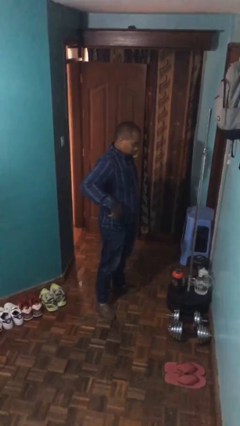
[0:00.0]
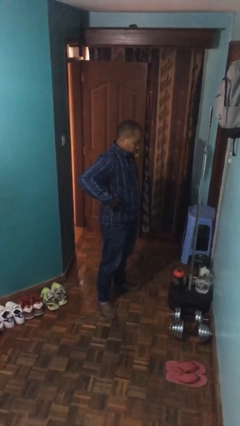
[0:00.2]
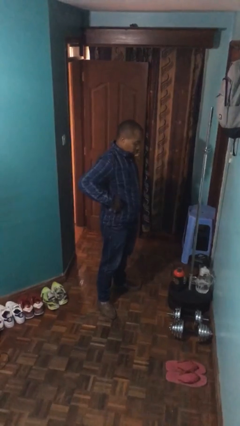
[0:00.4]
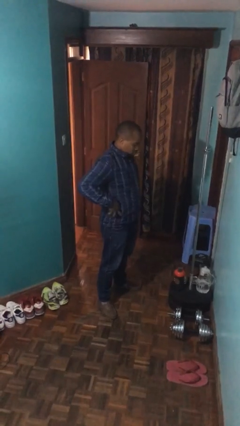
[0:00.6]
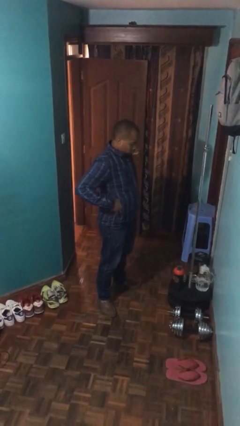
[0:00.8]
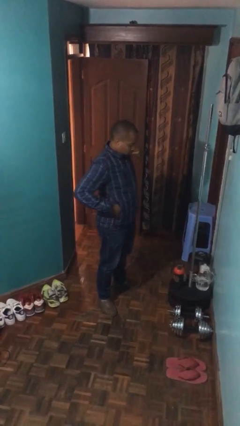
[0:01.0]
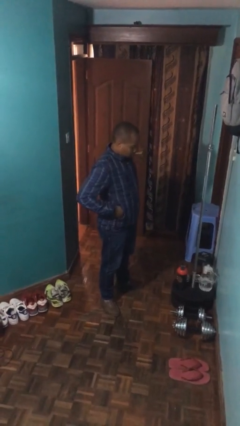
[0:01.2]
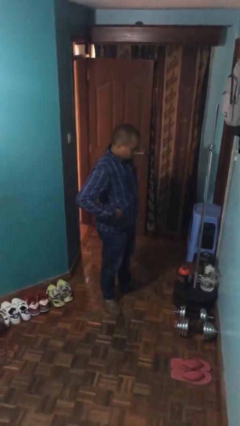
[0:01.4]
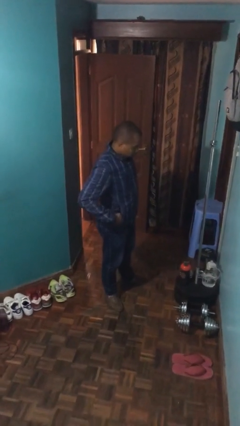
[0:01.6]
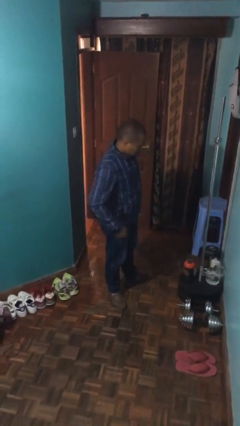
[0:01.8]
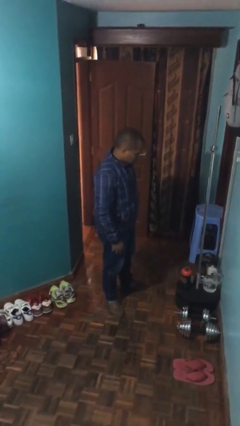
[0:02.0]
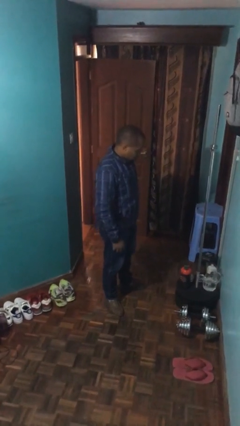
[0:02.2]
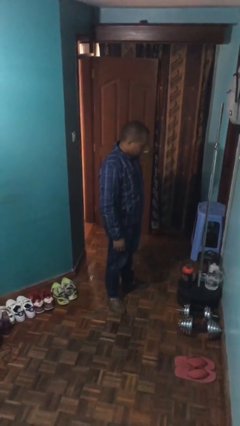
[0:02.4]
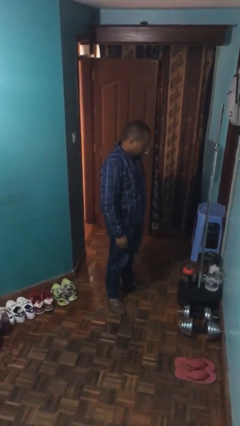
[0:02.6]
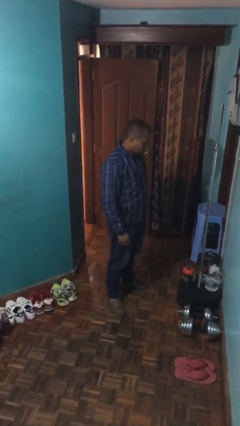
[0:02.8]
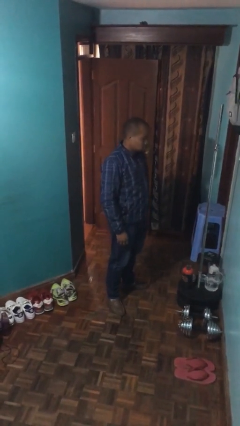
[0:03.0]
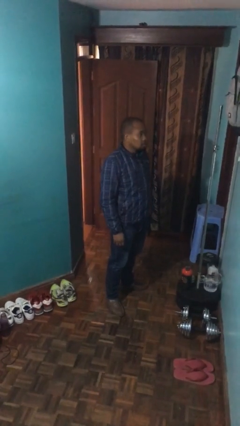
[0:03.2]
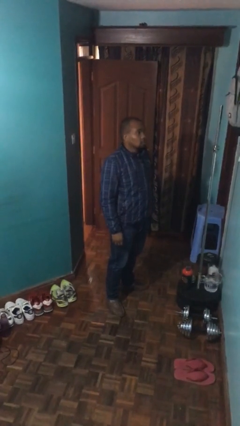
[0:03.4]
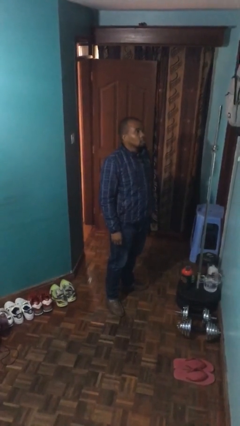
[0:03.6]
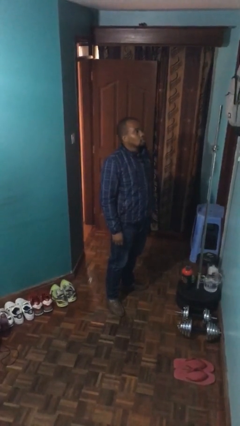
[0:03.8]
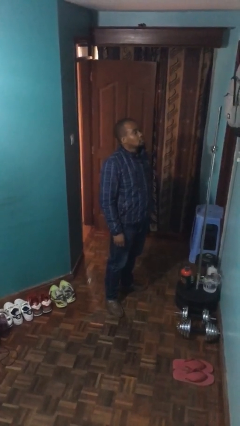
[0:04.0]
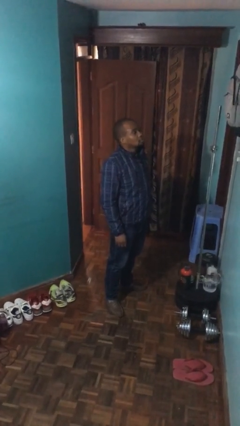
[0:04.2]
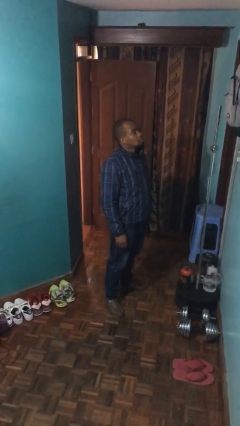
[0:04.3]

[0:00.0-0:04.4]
person puts phone into pocket

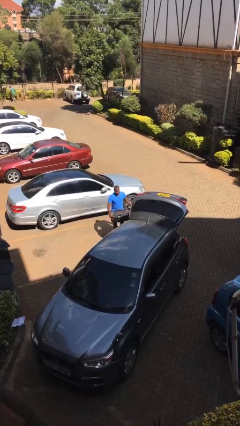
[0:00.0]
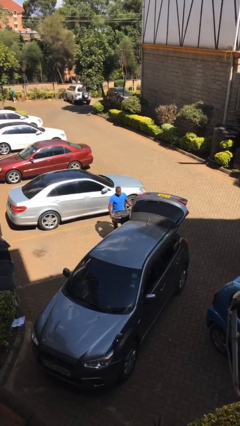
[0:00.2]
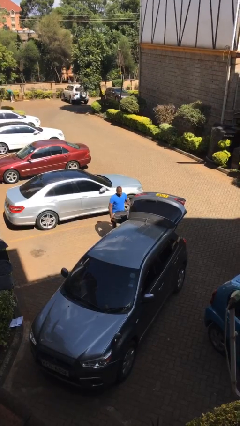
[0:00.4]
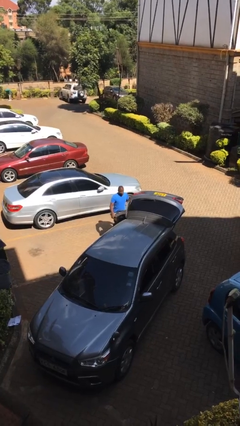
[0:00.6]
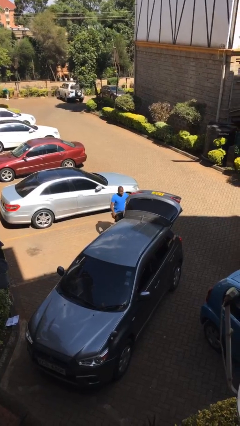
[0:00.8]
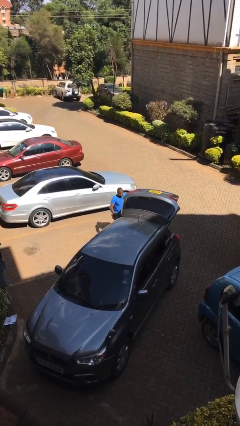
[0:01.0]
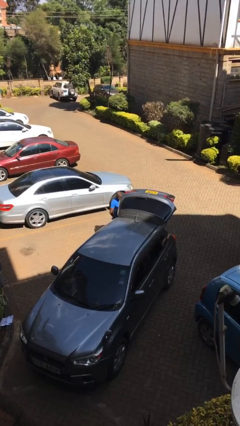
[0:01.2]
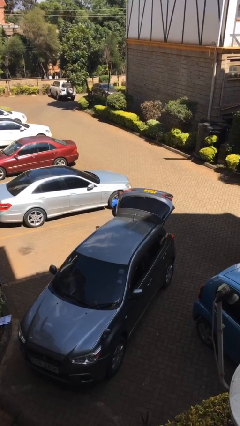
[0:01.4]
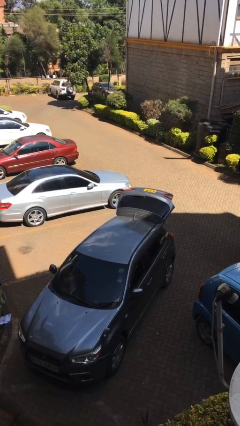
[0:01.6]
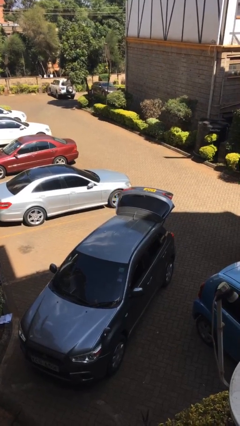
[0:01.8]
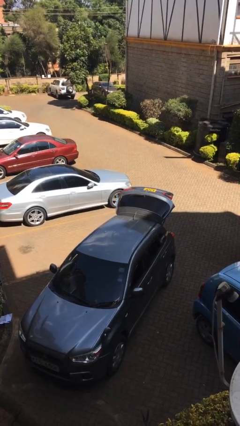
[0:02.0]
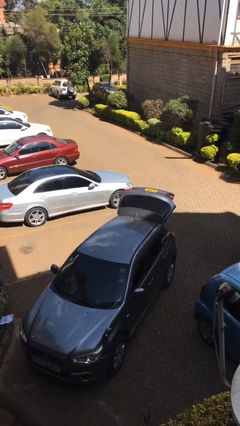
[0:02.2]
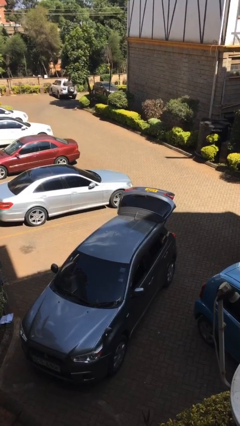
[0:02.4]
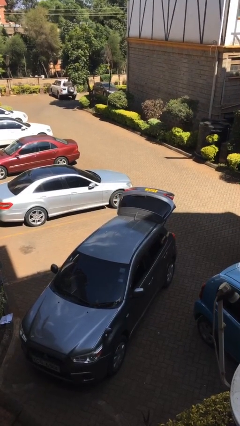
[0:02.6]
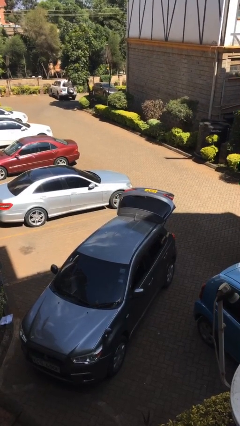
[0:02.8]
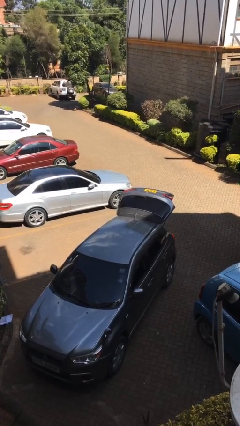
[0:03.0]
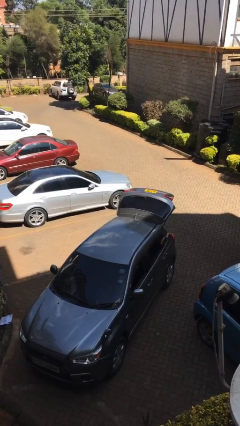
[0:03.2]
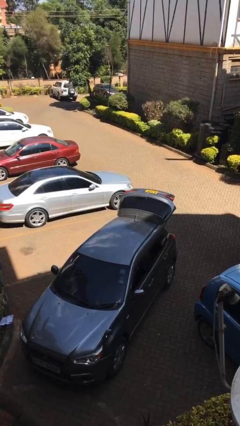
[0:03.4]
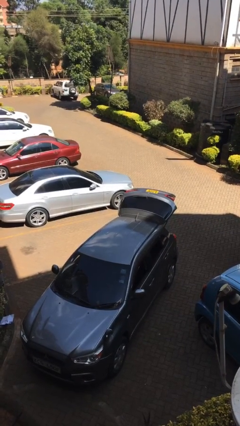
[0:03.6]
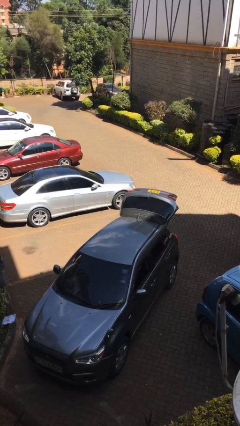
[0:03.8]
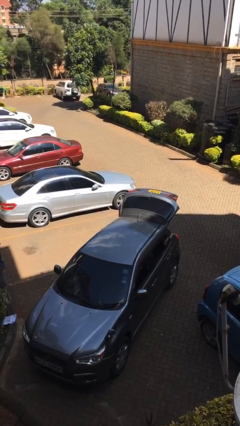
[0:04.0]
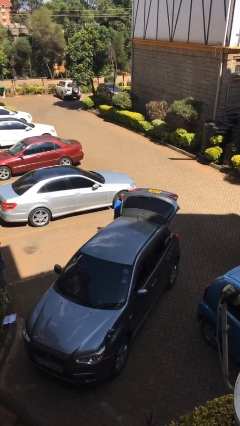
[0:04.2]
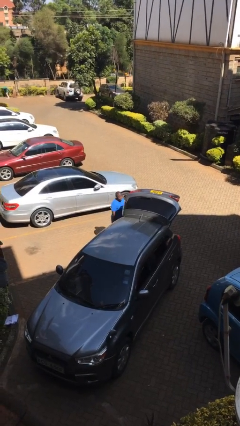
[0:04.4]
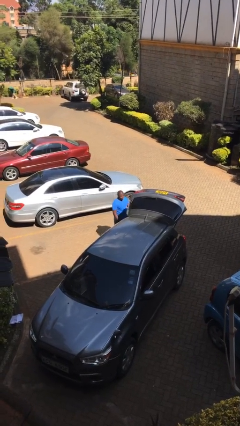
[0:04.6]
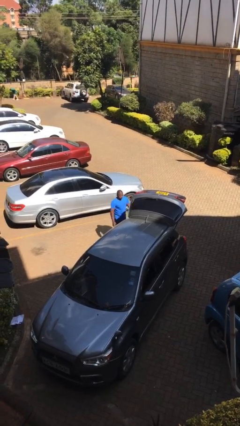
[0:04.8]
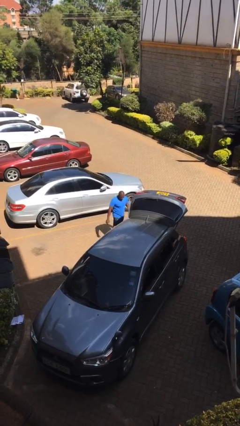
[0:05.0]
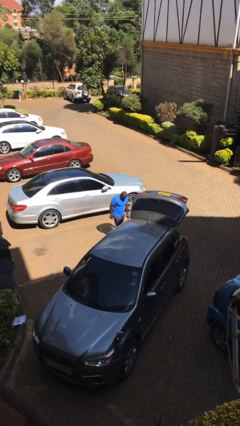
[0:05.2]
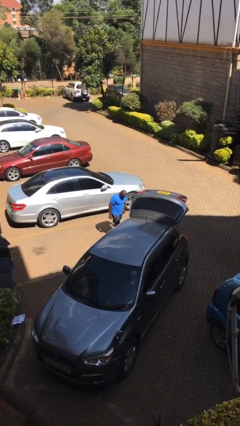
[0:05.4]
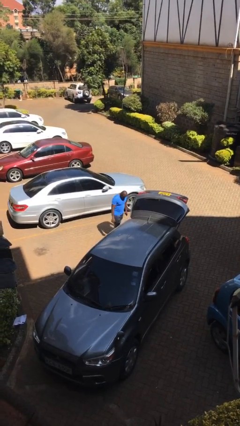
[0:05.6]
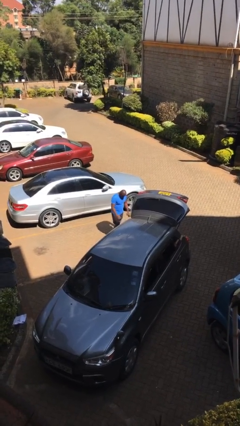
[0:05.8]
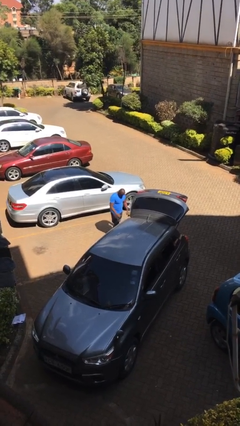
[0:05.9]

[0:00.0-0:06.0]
person loads car

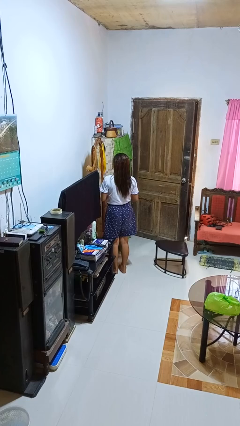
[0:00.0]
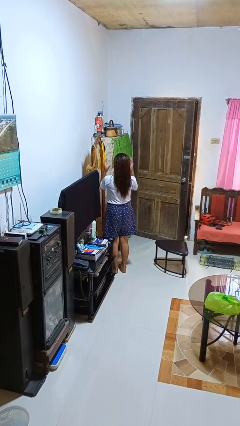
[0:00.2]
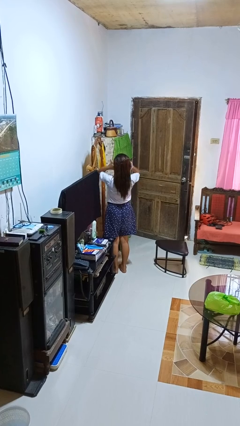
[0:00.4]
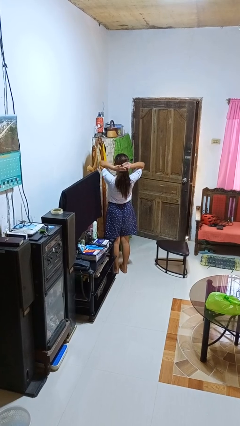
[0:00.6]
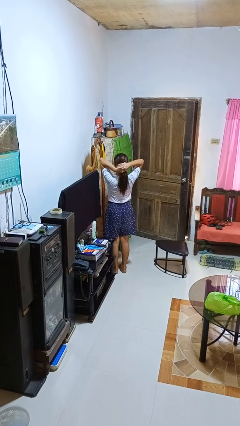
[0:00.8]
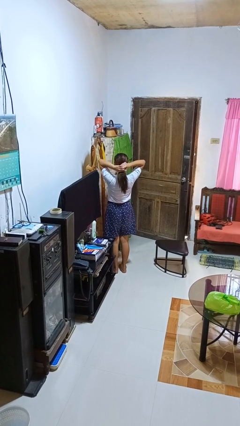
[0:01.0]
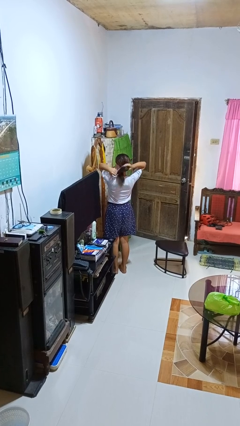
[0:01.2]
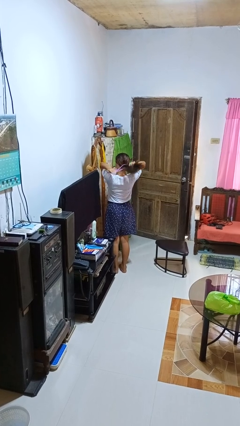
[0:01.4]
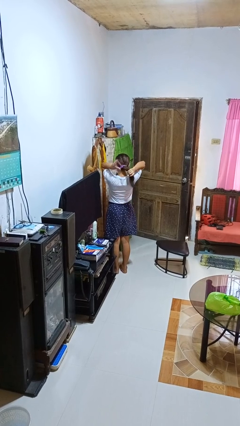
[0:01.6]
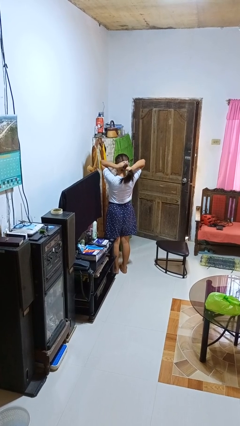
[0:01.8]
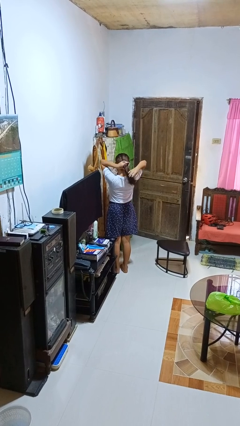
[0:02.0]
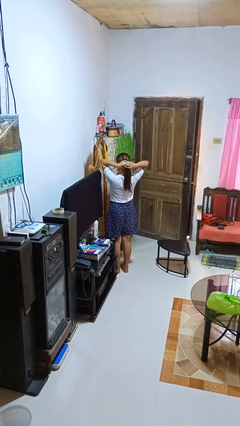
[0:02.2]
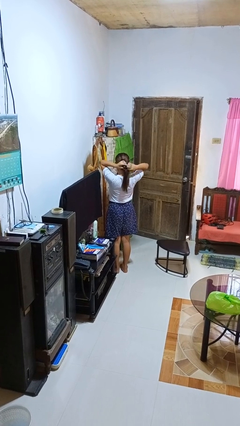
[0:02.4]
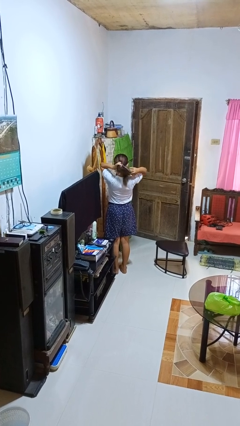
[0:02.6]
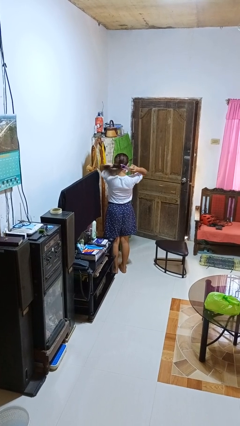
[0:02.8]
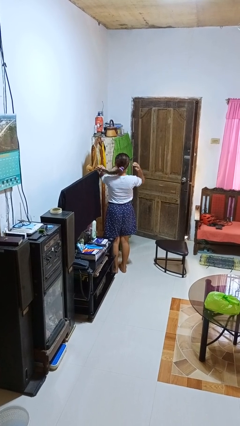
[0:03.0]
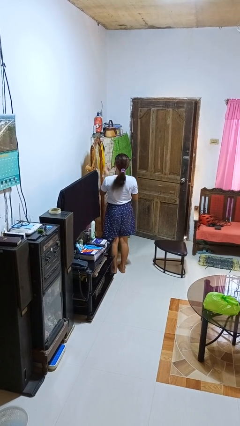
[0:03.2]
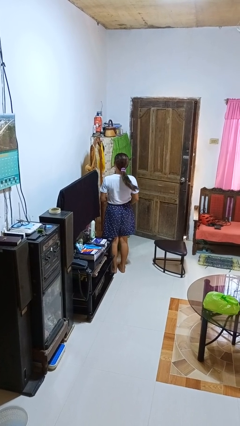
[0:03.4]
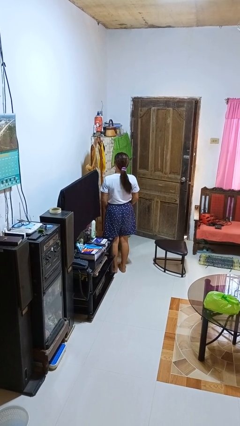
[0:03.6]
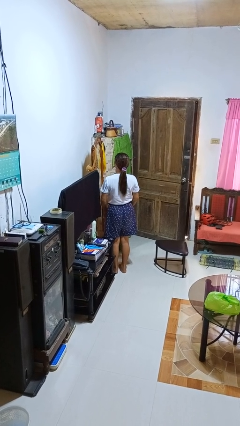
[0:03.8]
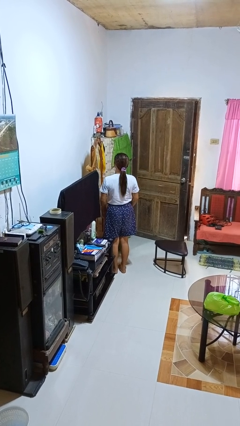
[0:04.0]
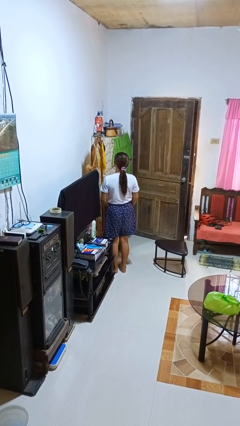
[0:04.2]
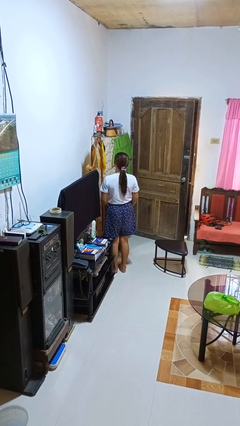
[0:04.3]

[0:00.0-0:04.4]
person puts hair in ponytail

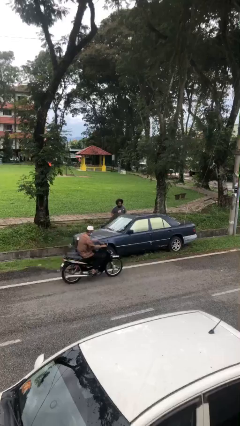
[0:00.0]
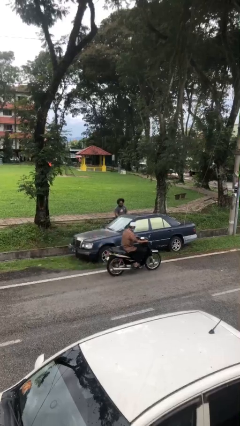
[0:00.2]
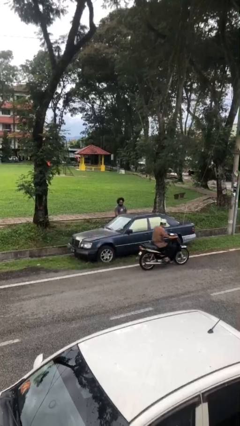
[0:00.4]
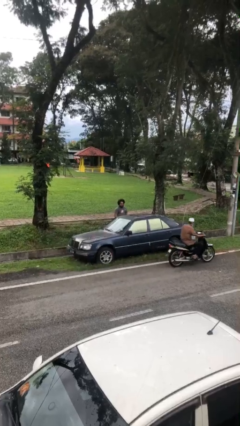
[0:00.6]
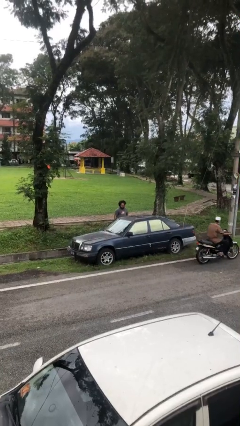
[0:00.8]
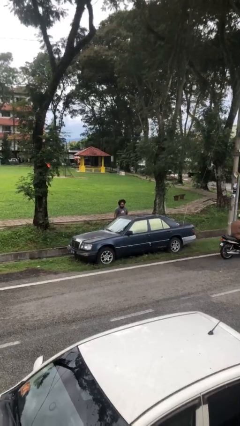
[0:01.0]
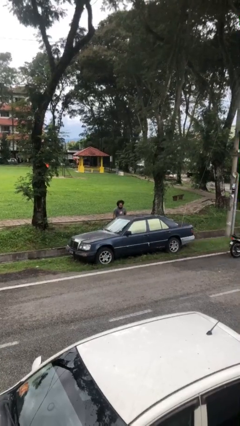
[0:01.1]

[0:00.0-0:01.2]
person closes car door

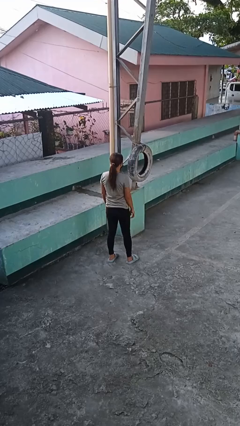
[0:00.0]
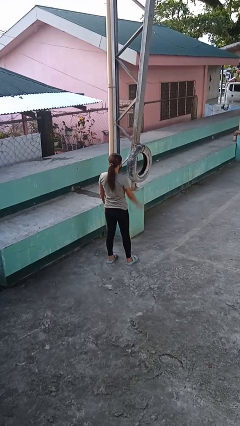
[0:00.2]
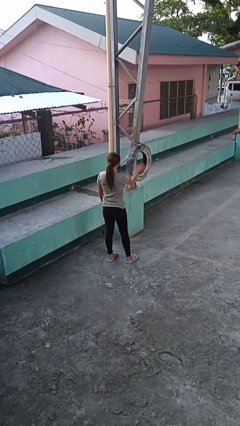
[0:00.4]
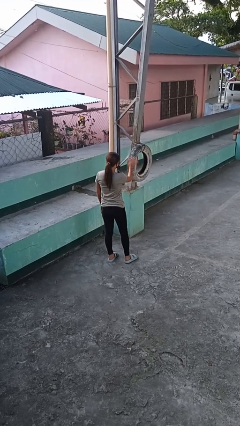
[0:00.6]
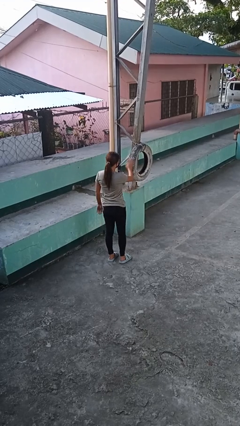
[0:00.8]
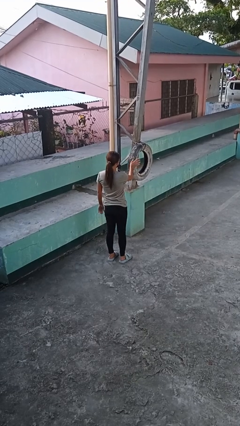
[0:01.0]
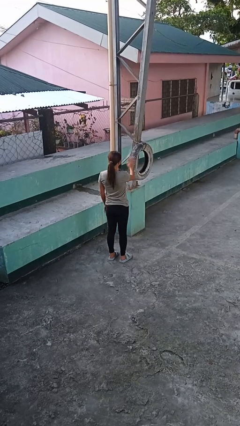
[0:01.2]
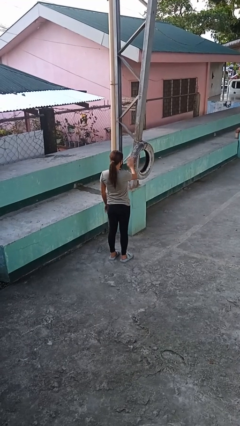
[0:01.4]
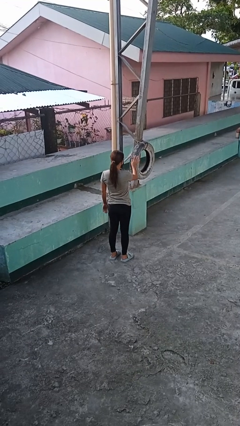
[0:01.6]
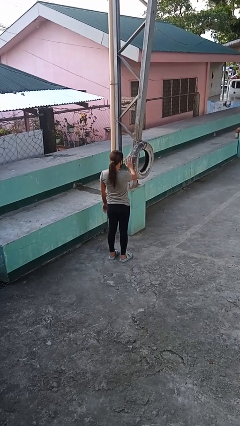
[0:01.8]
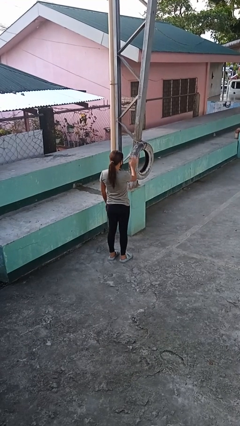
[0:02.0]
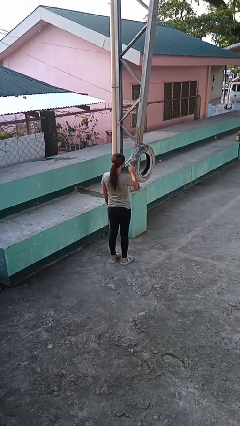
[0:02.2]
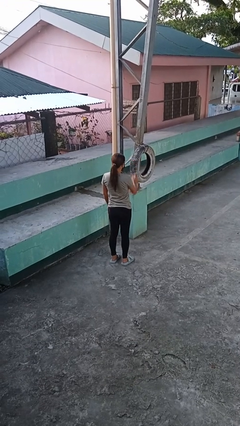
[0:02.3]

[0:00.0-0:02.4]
person waves hand over object
